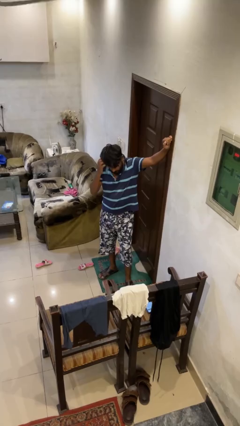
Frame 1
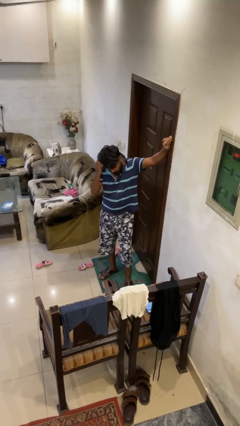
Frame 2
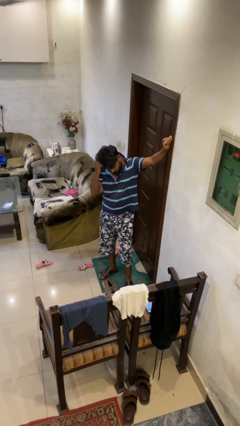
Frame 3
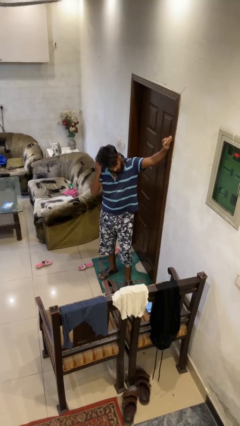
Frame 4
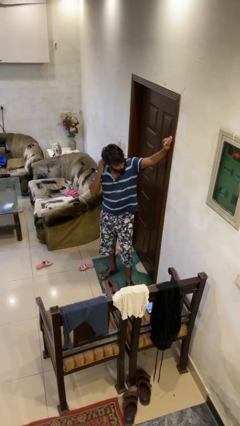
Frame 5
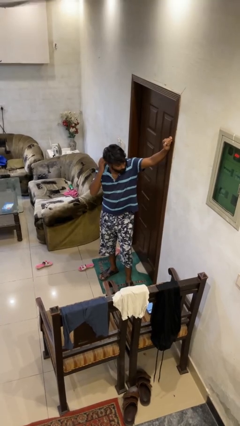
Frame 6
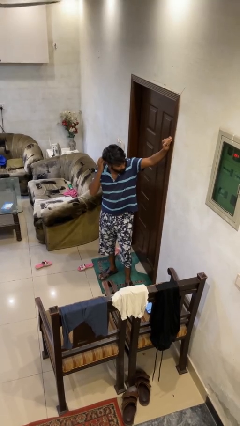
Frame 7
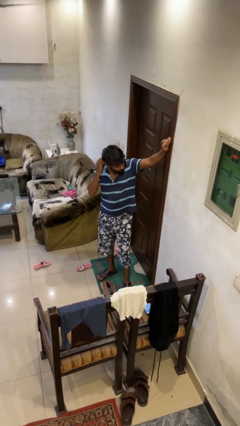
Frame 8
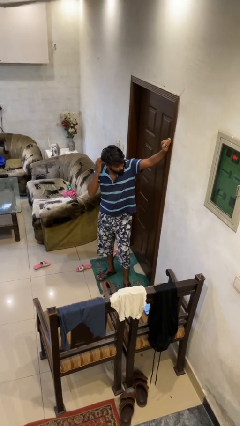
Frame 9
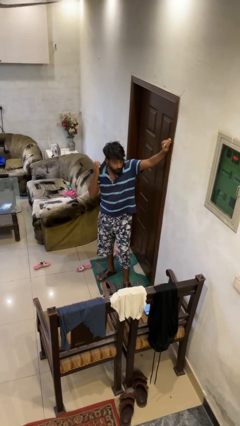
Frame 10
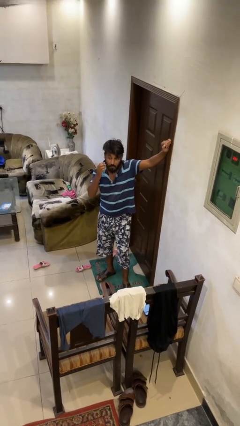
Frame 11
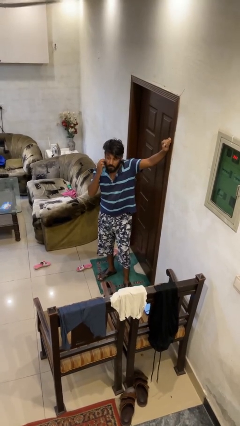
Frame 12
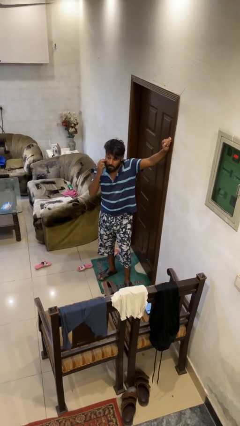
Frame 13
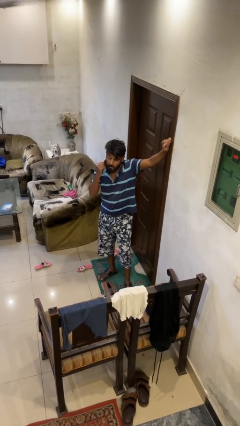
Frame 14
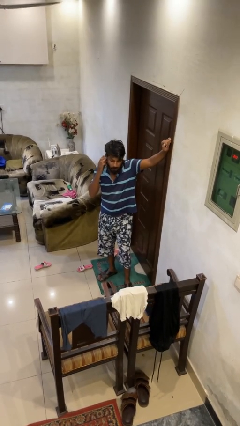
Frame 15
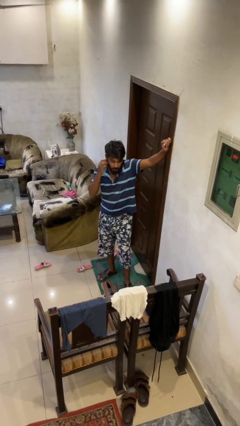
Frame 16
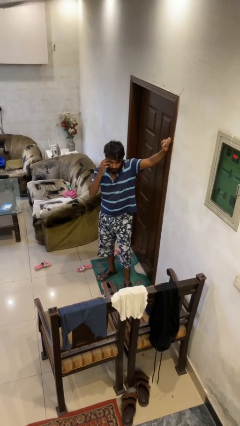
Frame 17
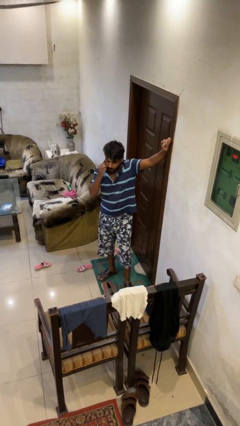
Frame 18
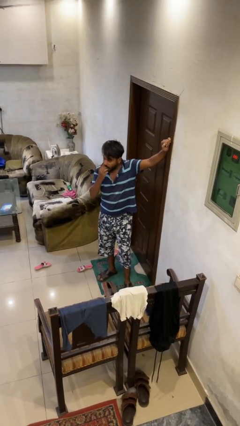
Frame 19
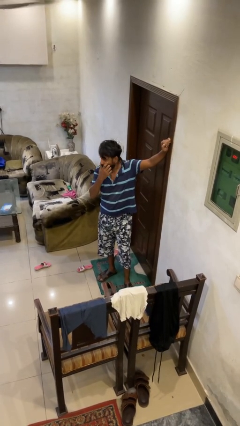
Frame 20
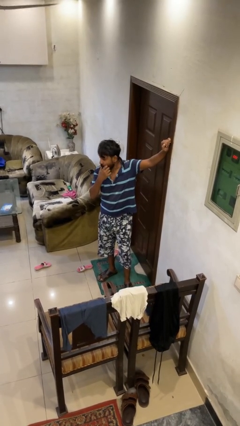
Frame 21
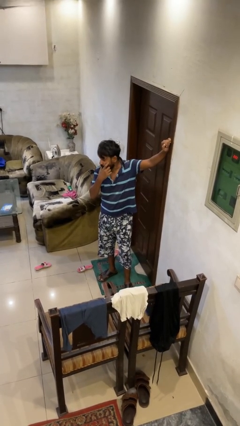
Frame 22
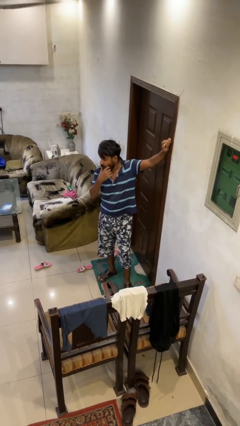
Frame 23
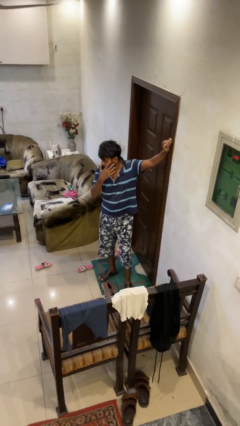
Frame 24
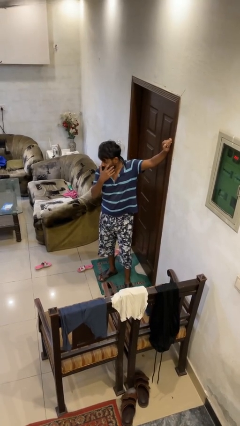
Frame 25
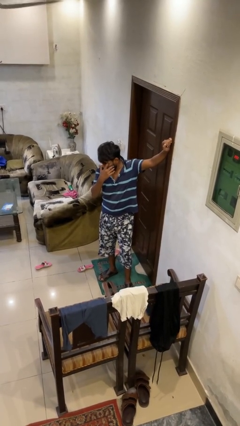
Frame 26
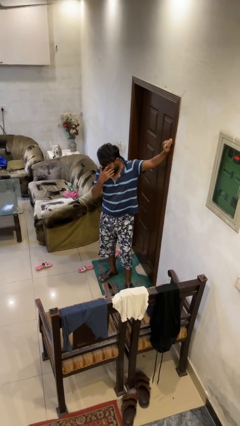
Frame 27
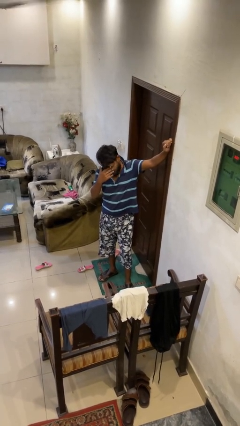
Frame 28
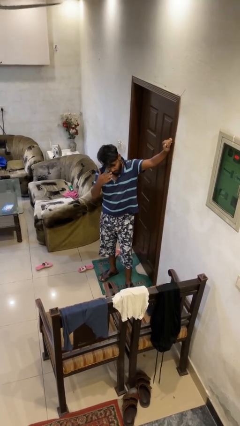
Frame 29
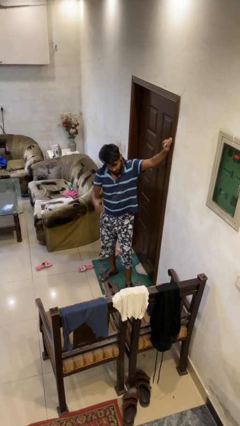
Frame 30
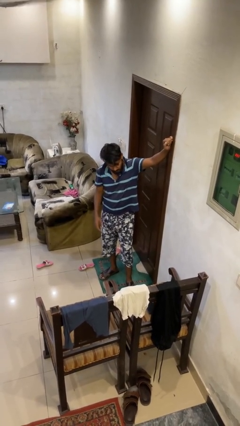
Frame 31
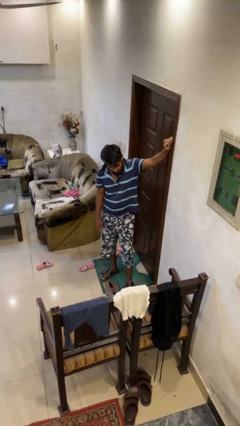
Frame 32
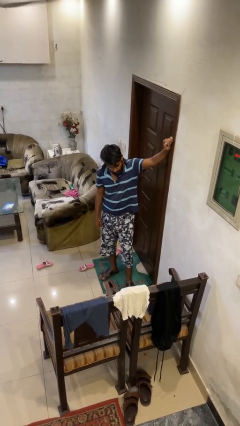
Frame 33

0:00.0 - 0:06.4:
person scratches face

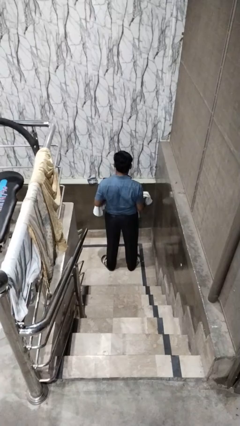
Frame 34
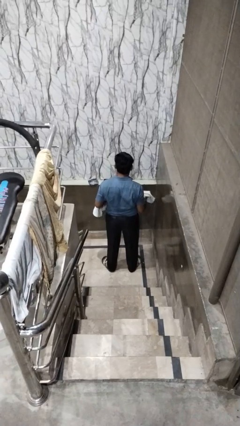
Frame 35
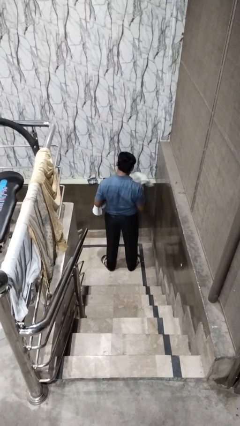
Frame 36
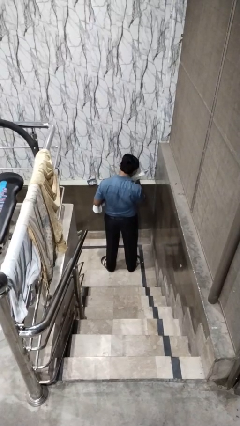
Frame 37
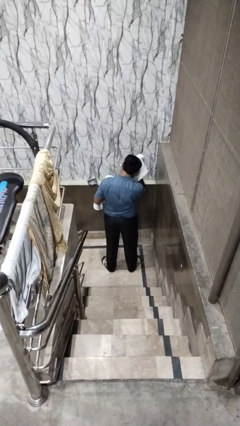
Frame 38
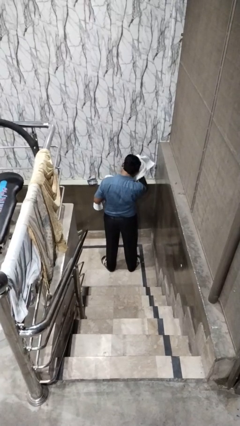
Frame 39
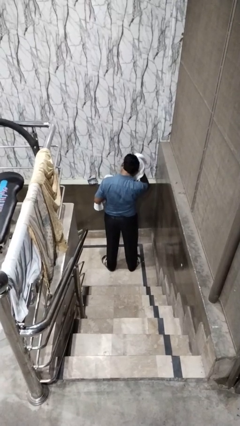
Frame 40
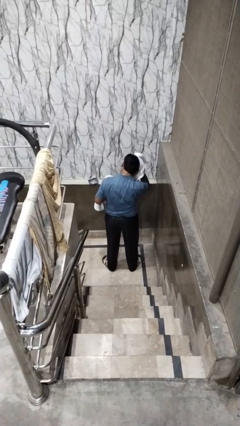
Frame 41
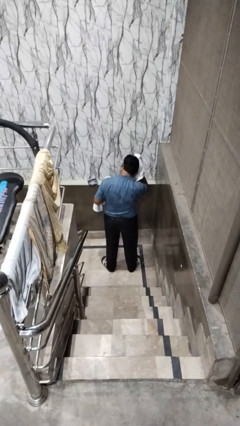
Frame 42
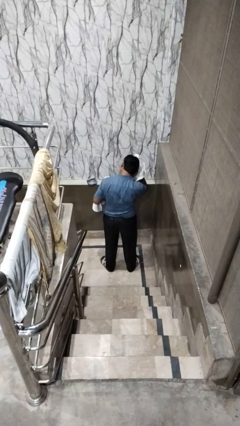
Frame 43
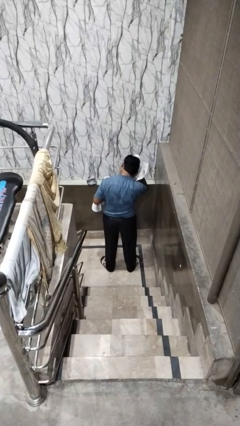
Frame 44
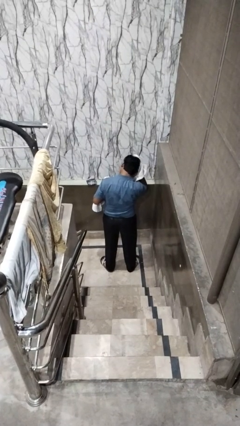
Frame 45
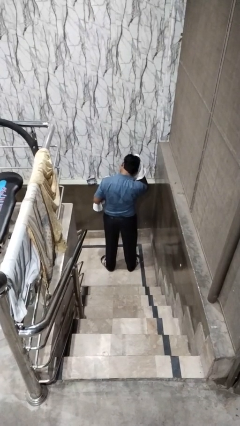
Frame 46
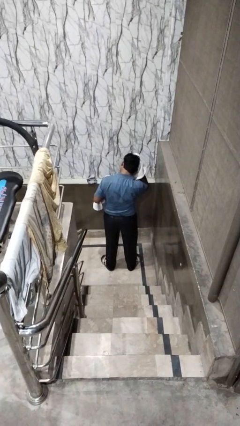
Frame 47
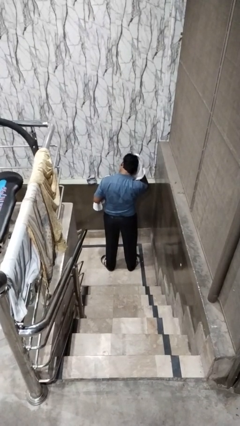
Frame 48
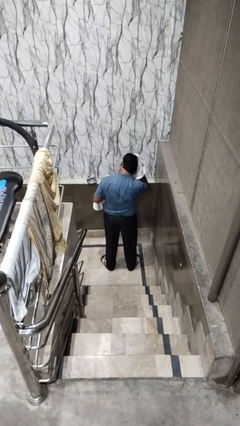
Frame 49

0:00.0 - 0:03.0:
person dries hair with towel

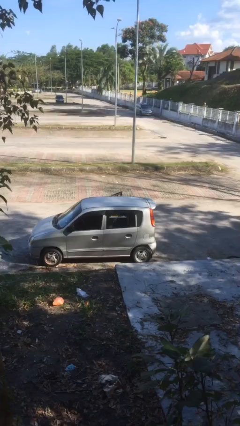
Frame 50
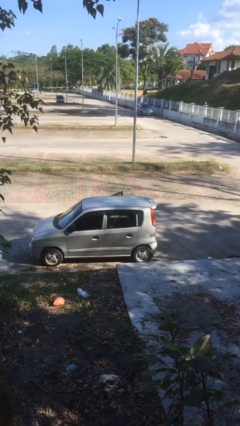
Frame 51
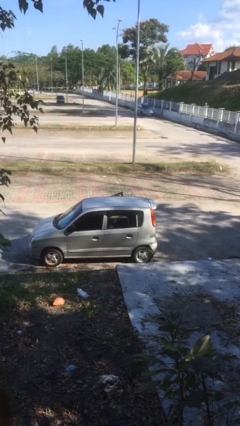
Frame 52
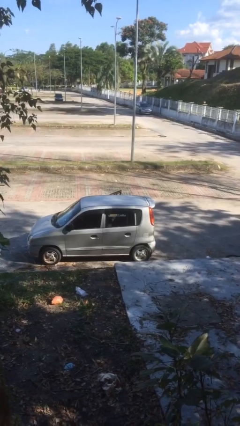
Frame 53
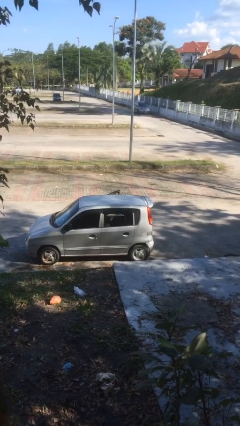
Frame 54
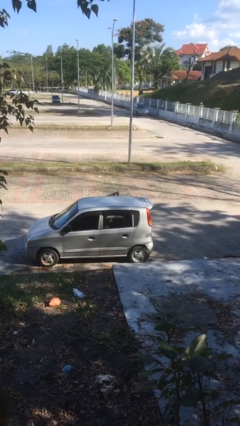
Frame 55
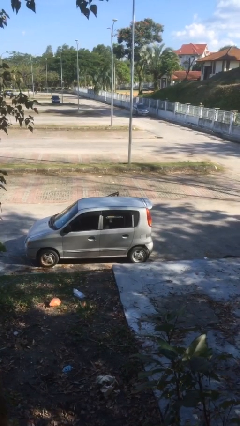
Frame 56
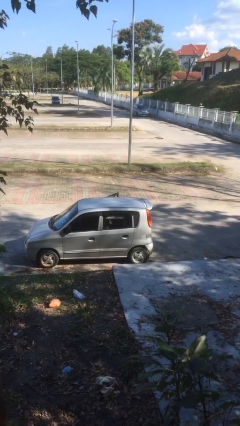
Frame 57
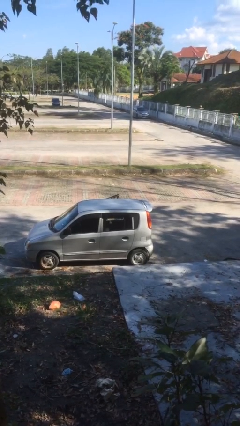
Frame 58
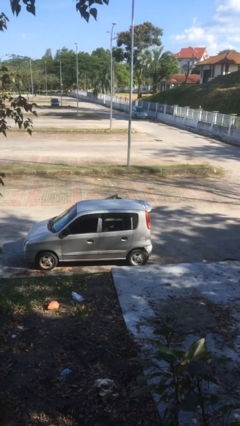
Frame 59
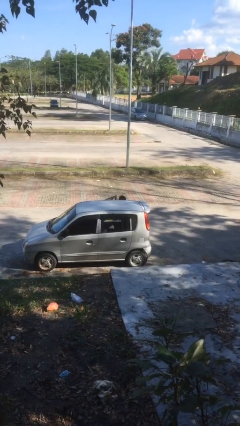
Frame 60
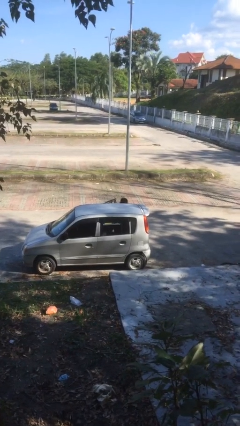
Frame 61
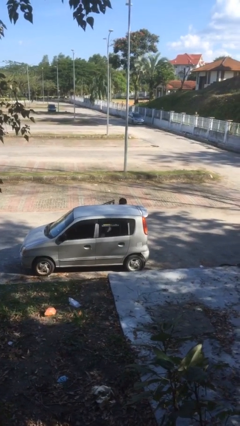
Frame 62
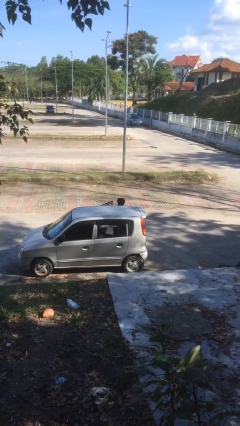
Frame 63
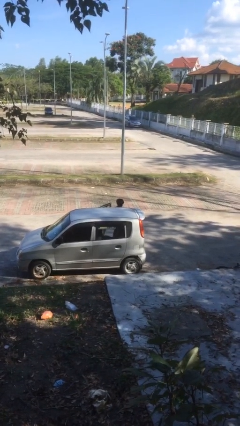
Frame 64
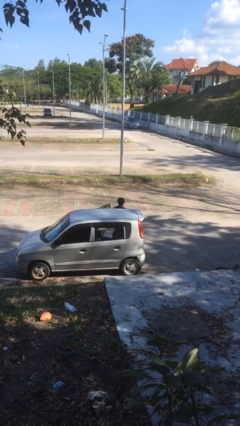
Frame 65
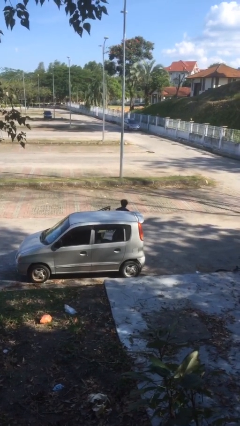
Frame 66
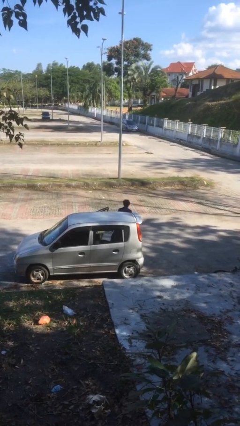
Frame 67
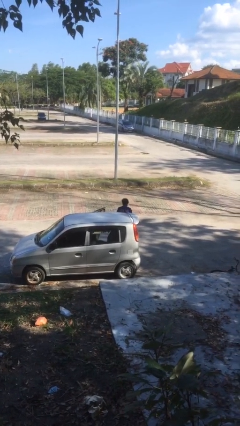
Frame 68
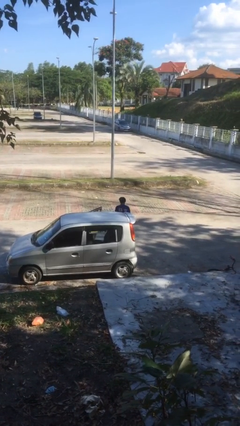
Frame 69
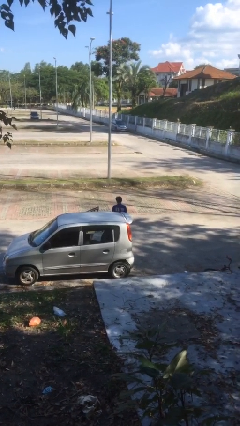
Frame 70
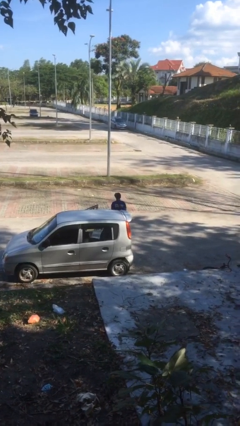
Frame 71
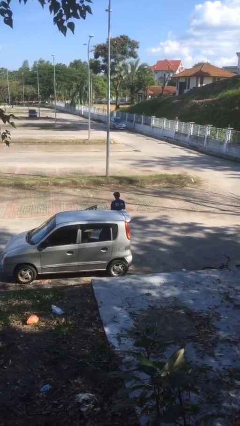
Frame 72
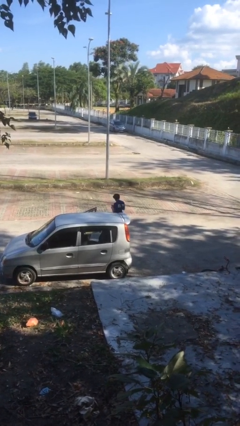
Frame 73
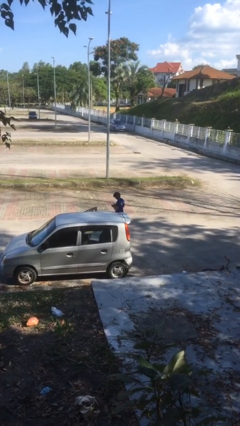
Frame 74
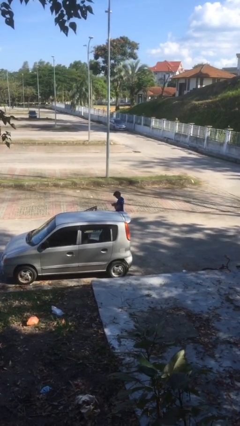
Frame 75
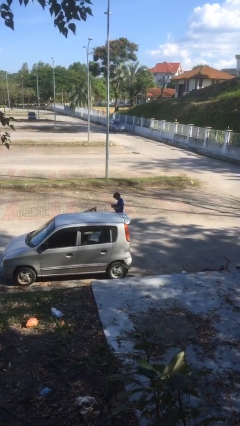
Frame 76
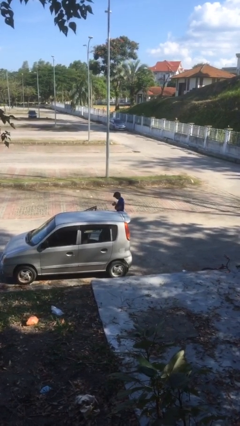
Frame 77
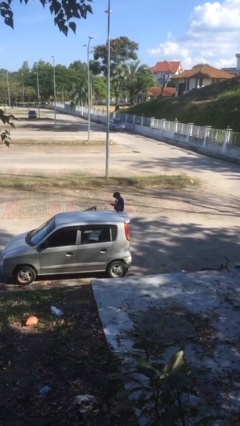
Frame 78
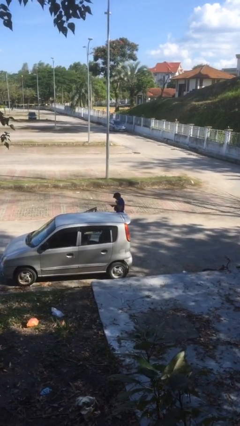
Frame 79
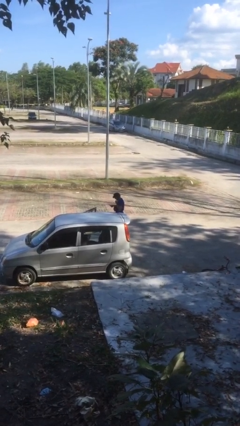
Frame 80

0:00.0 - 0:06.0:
person exits car

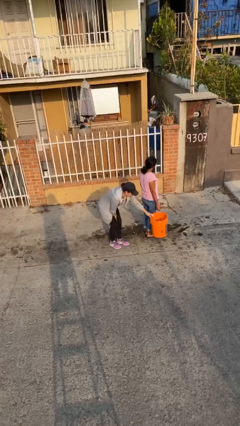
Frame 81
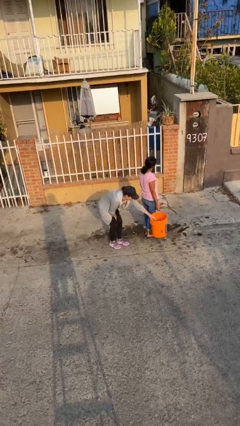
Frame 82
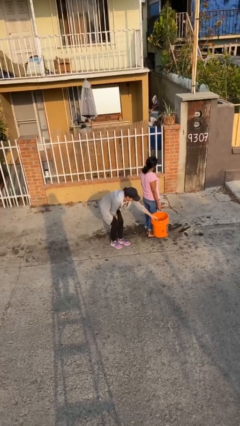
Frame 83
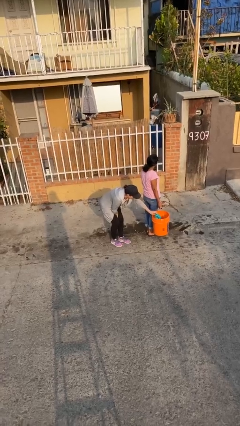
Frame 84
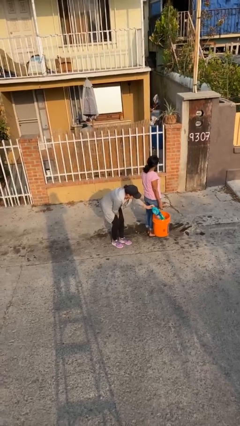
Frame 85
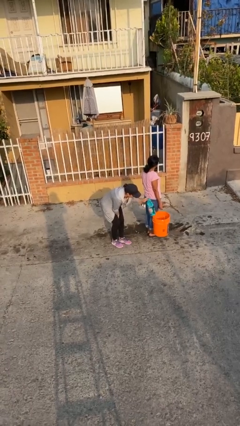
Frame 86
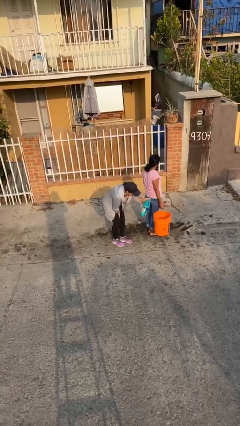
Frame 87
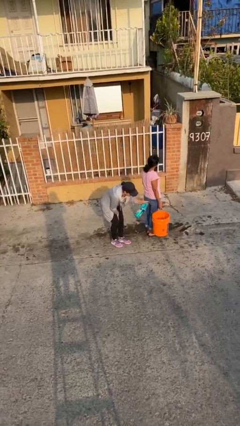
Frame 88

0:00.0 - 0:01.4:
person steals object from person

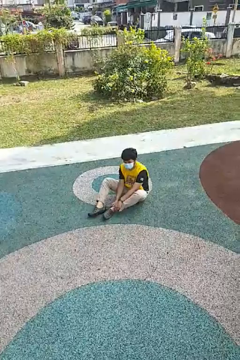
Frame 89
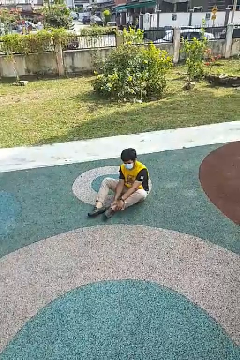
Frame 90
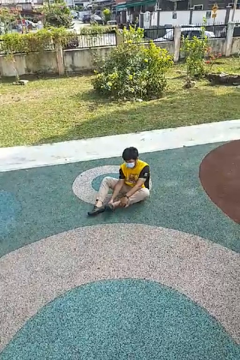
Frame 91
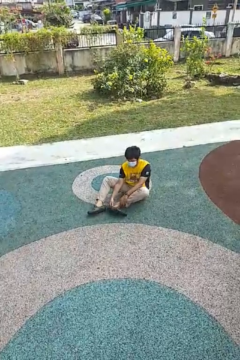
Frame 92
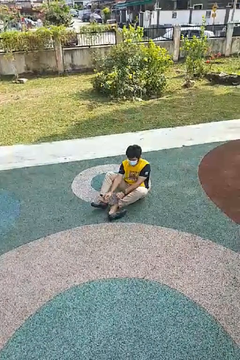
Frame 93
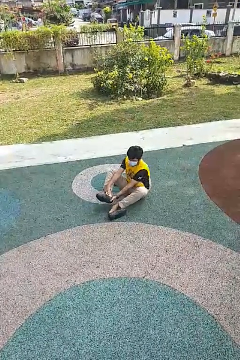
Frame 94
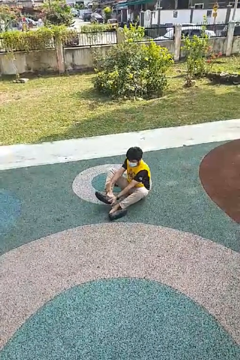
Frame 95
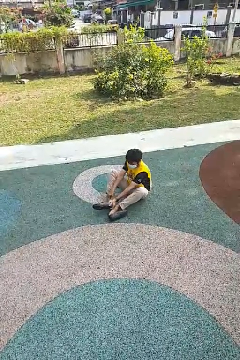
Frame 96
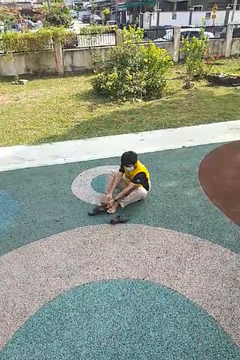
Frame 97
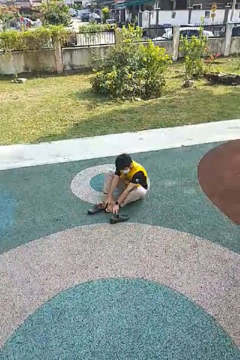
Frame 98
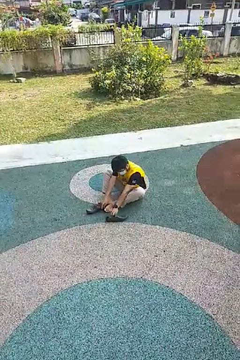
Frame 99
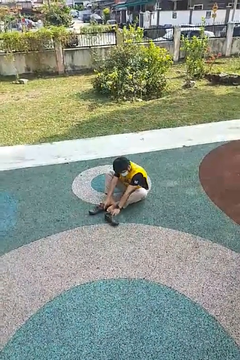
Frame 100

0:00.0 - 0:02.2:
person takes off shoes
